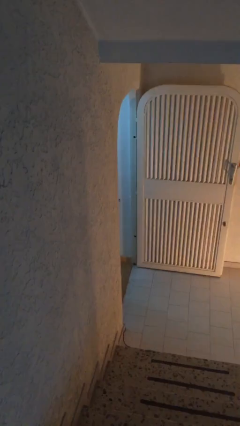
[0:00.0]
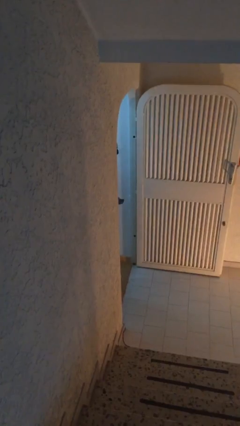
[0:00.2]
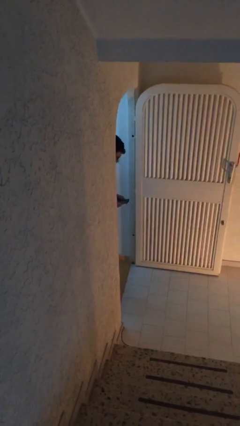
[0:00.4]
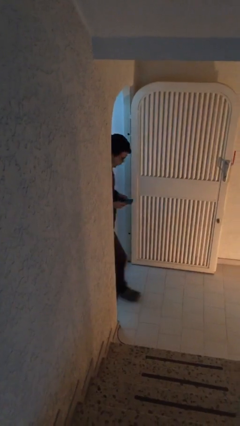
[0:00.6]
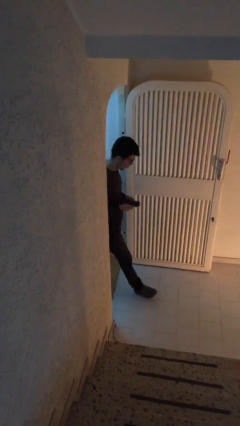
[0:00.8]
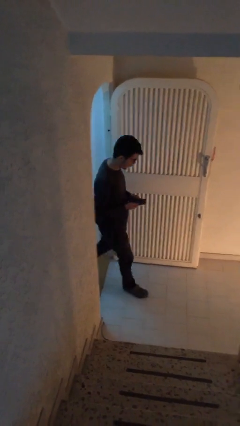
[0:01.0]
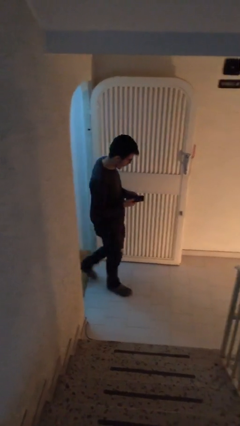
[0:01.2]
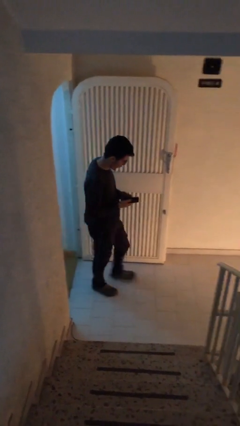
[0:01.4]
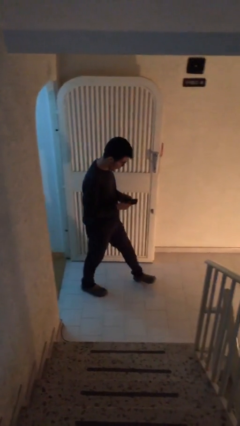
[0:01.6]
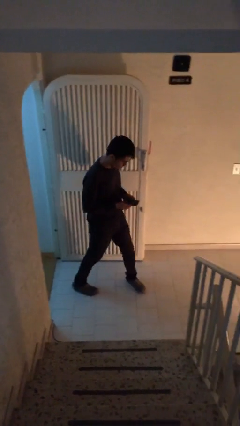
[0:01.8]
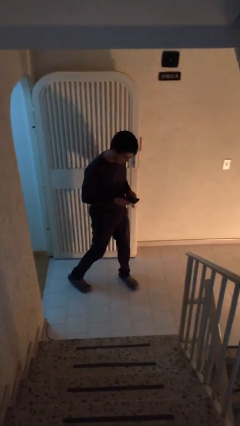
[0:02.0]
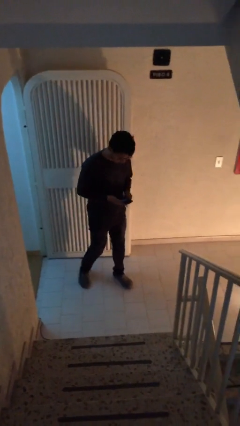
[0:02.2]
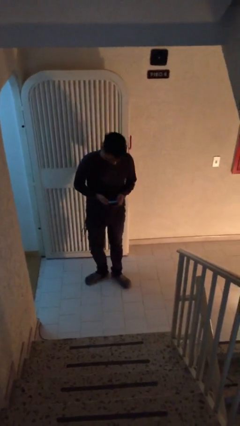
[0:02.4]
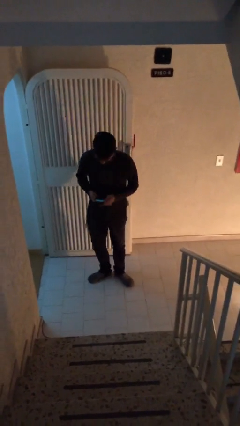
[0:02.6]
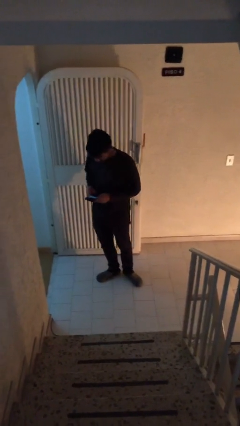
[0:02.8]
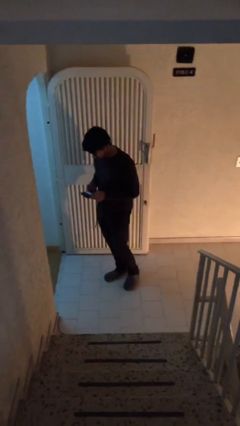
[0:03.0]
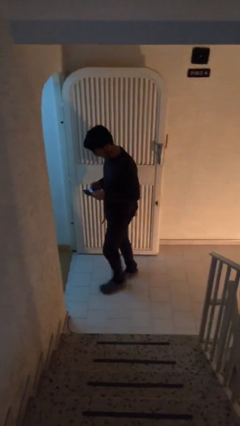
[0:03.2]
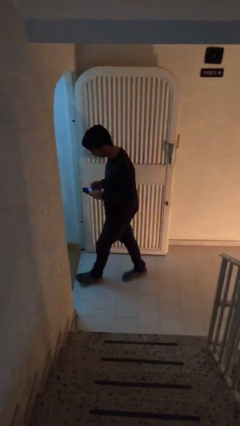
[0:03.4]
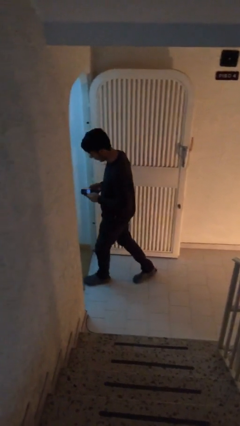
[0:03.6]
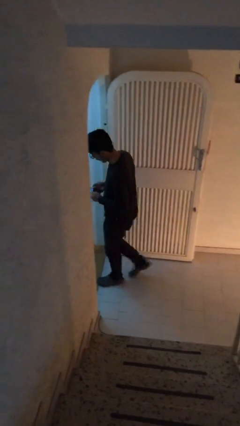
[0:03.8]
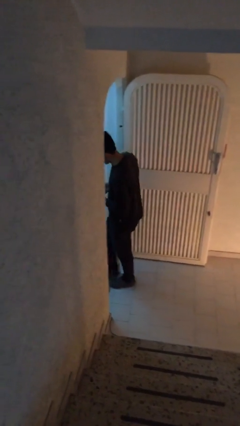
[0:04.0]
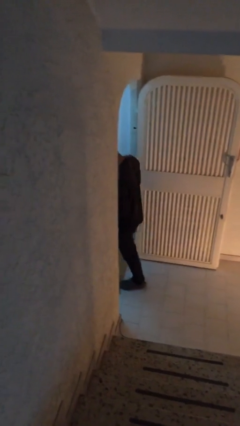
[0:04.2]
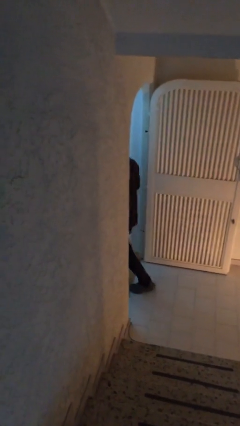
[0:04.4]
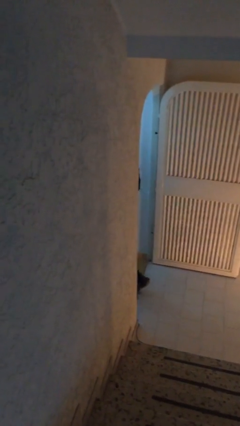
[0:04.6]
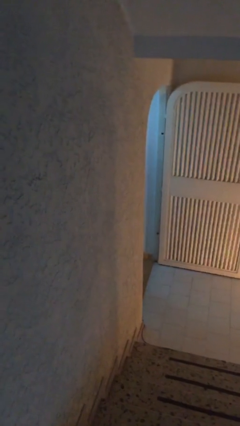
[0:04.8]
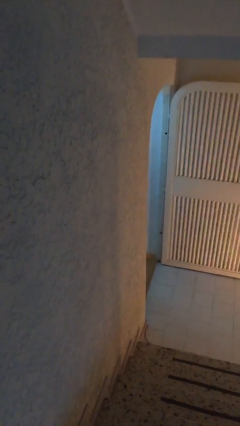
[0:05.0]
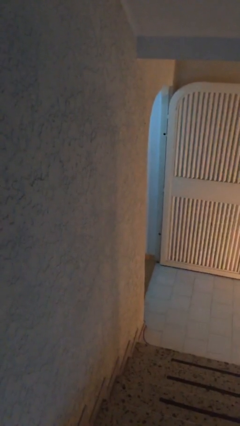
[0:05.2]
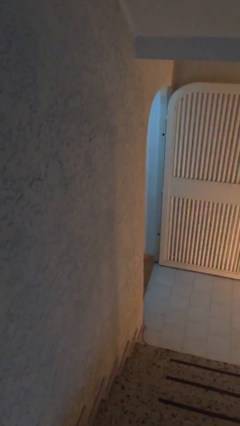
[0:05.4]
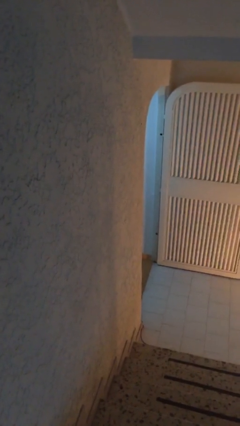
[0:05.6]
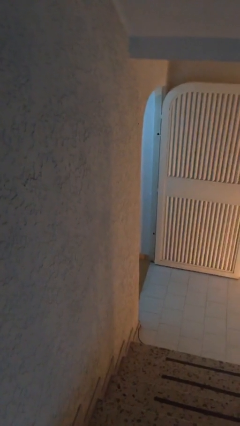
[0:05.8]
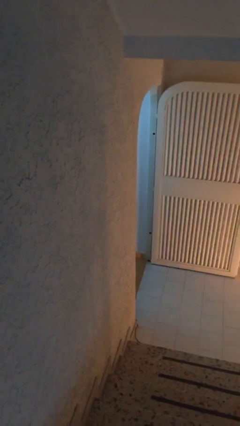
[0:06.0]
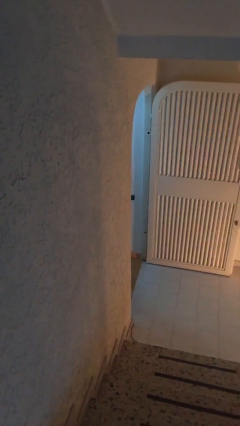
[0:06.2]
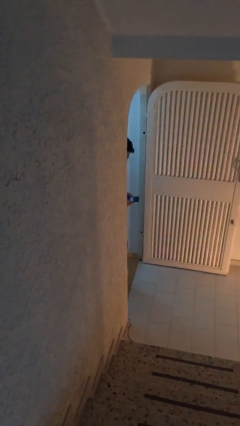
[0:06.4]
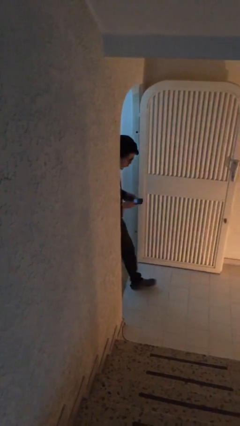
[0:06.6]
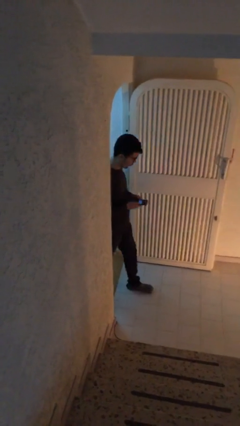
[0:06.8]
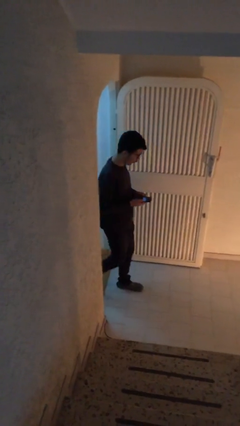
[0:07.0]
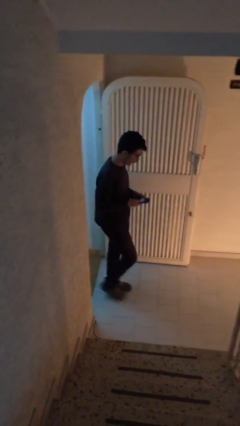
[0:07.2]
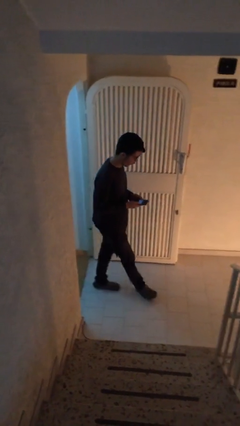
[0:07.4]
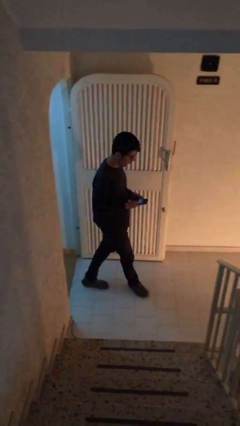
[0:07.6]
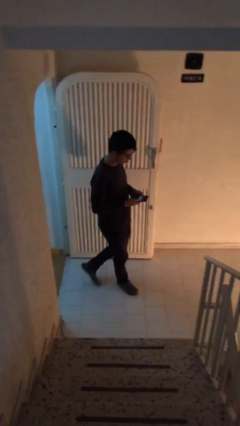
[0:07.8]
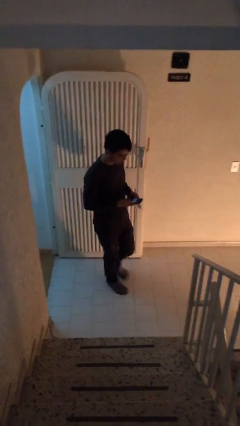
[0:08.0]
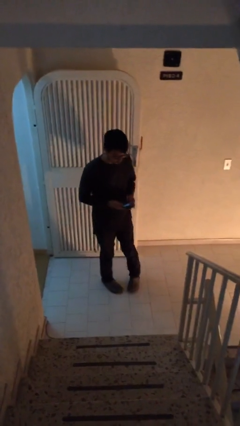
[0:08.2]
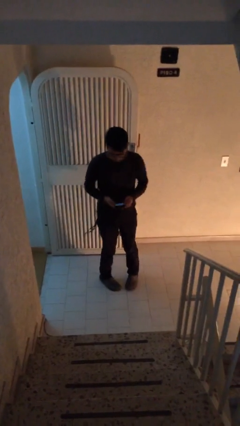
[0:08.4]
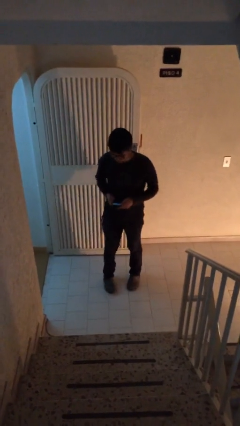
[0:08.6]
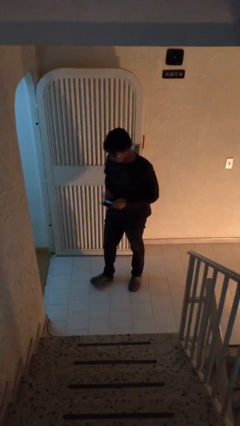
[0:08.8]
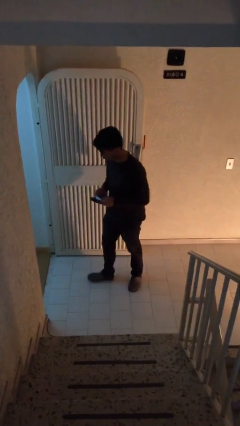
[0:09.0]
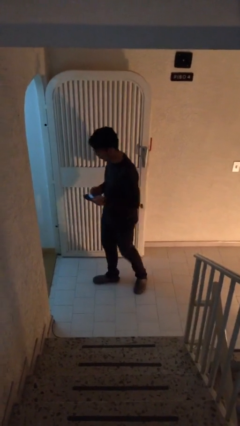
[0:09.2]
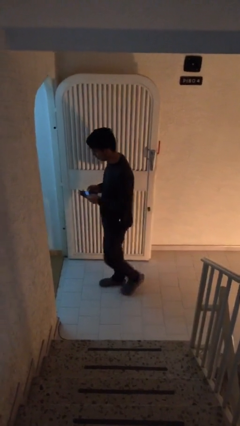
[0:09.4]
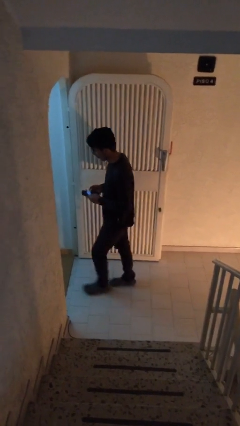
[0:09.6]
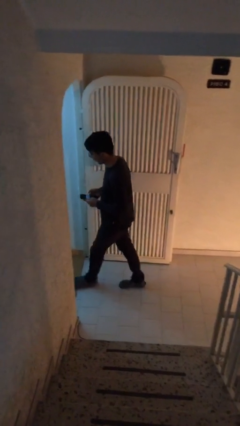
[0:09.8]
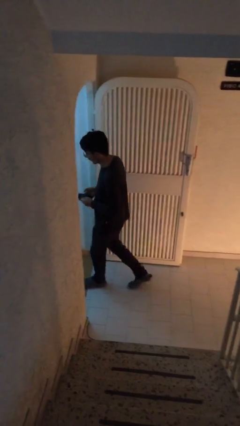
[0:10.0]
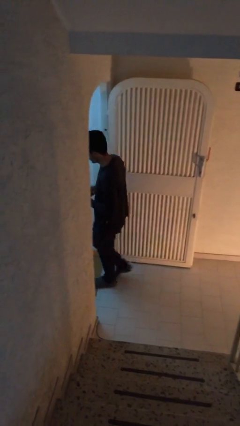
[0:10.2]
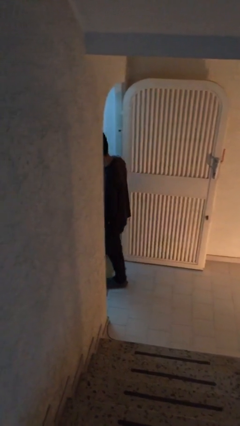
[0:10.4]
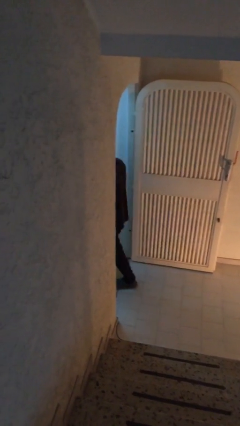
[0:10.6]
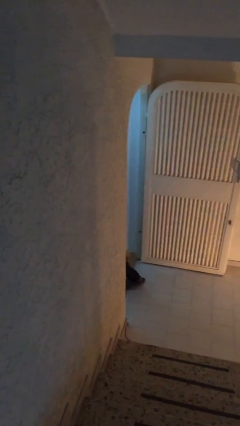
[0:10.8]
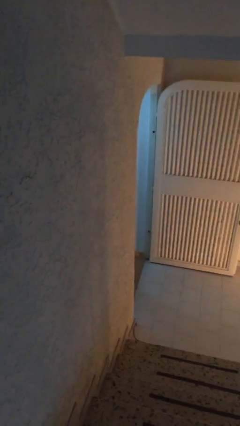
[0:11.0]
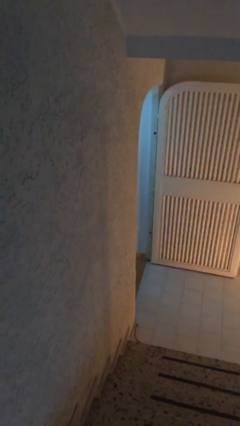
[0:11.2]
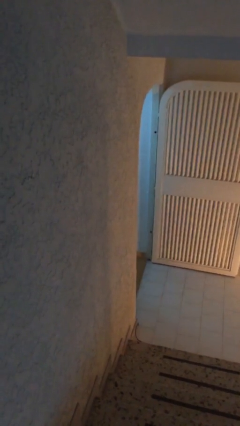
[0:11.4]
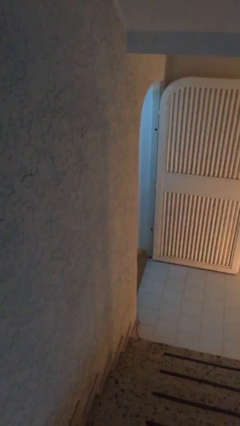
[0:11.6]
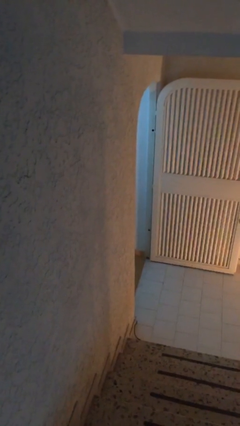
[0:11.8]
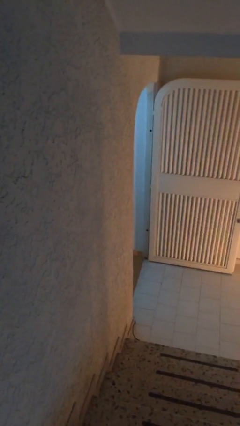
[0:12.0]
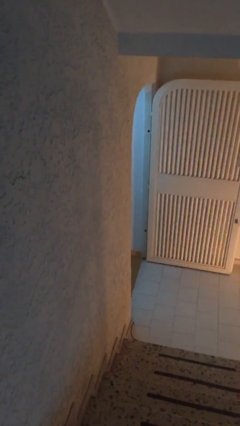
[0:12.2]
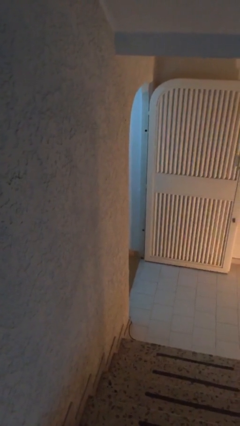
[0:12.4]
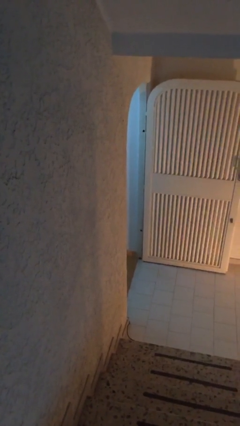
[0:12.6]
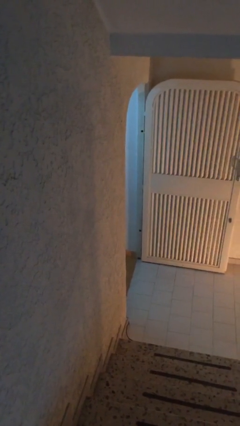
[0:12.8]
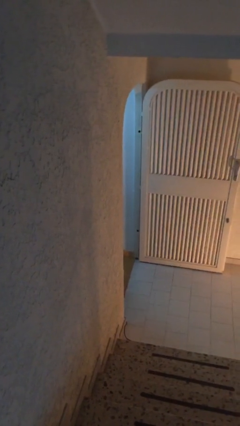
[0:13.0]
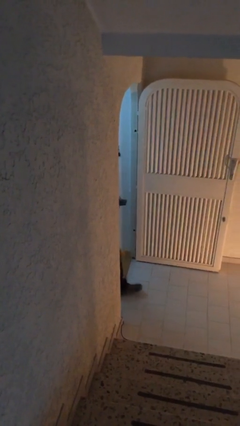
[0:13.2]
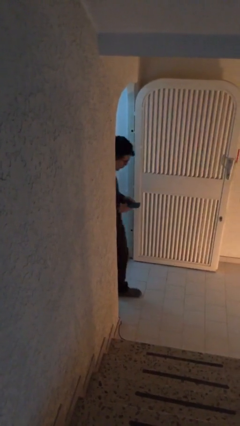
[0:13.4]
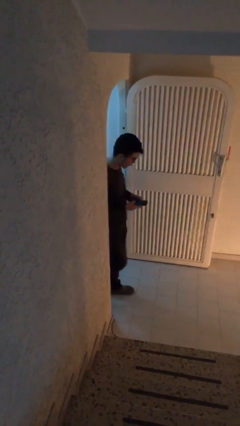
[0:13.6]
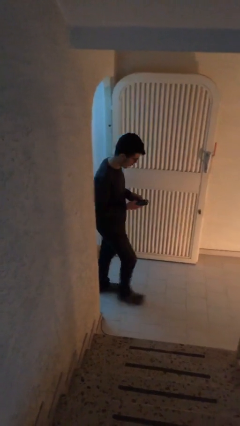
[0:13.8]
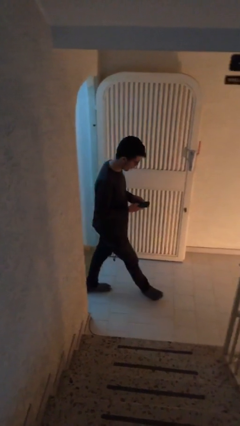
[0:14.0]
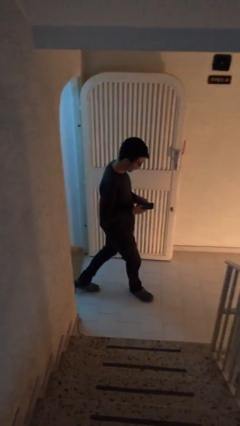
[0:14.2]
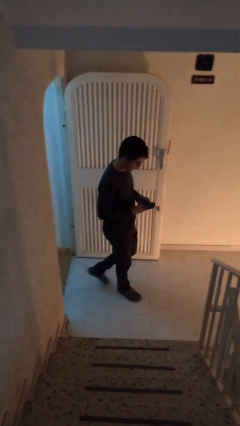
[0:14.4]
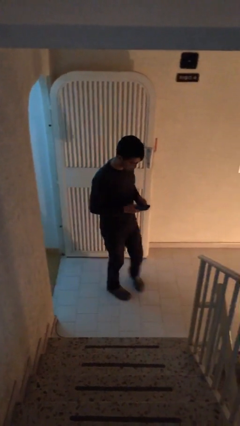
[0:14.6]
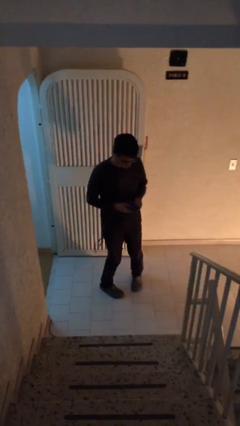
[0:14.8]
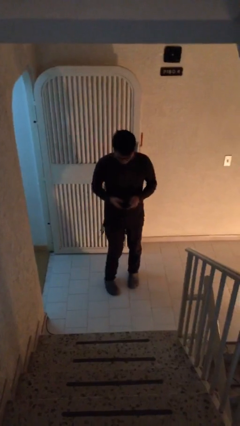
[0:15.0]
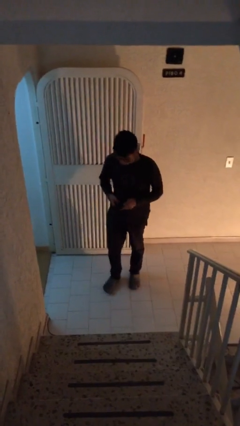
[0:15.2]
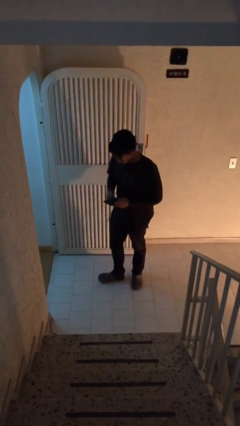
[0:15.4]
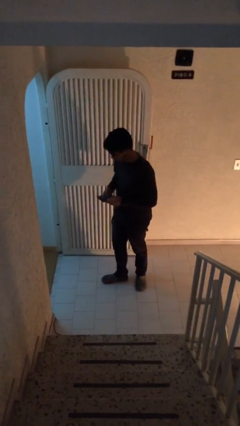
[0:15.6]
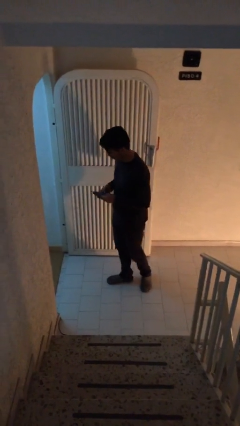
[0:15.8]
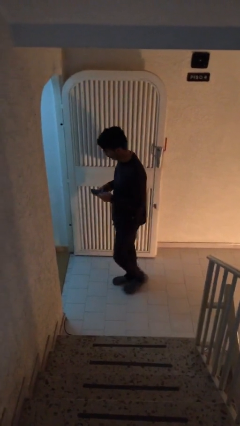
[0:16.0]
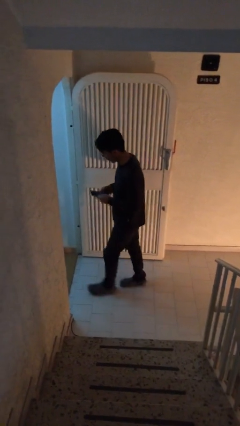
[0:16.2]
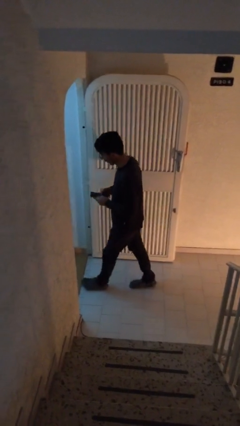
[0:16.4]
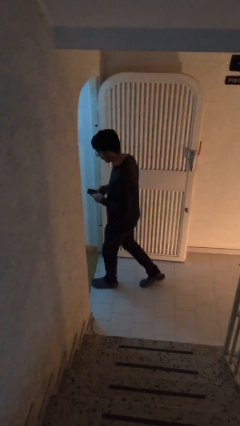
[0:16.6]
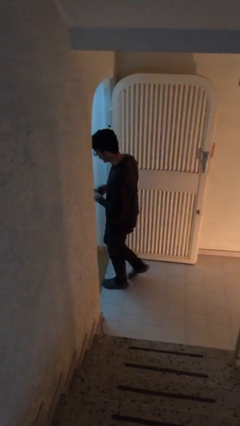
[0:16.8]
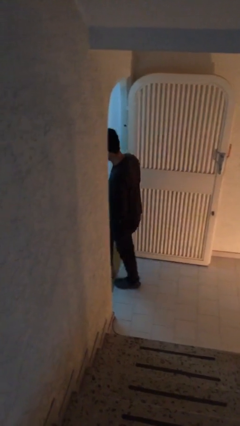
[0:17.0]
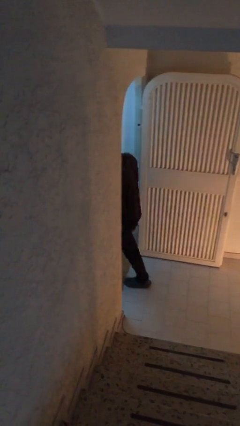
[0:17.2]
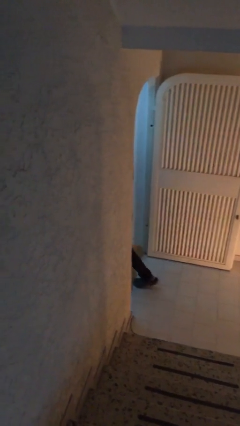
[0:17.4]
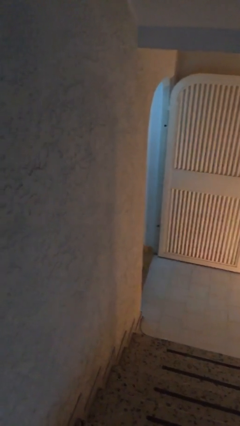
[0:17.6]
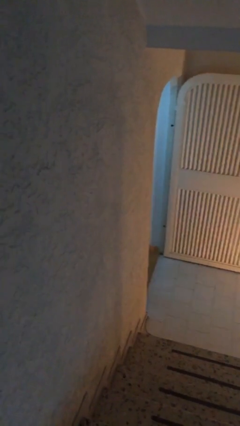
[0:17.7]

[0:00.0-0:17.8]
person texts on phone

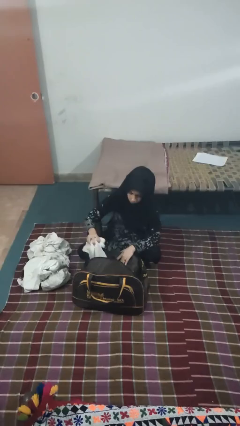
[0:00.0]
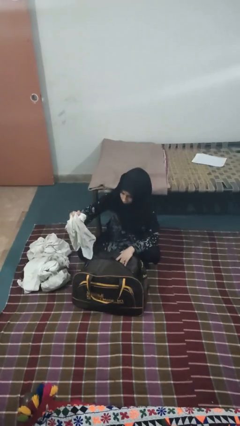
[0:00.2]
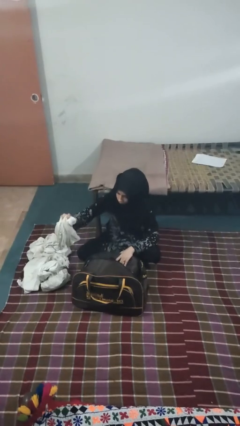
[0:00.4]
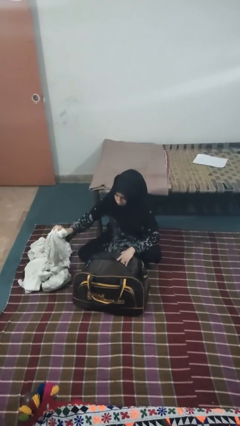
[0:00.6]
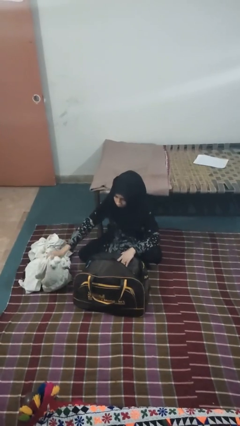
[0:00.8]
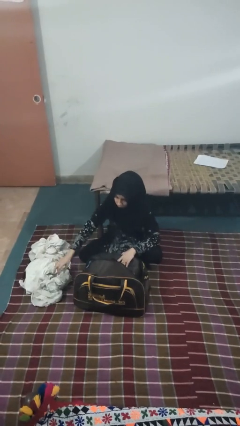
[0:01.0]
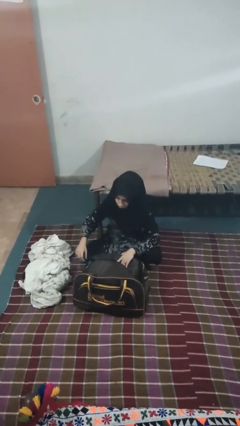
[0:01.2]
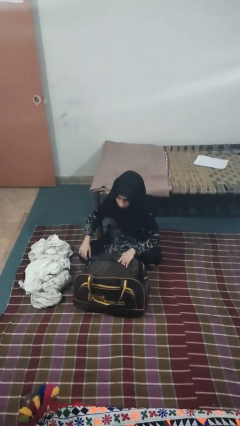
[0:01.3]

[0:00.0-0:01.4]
person unloads clothes from suitcase
